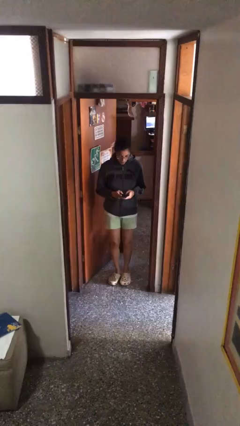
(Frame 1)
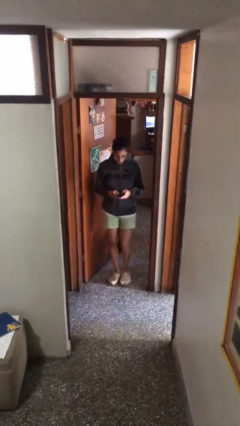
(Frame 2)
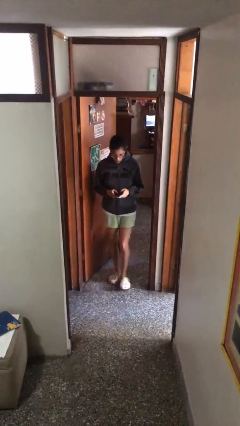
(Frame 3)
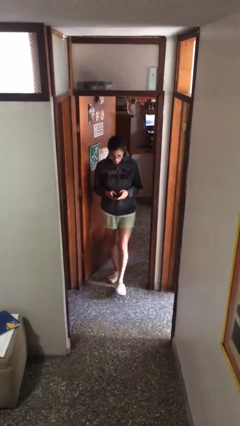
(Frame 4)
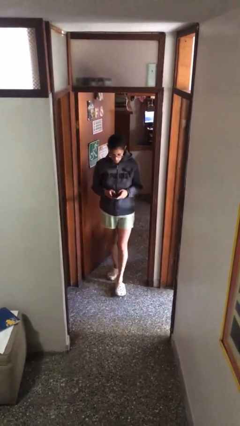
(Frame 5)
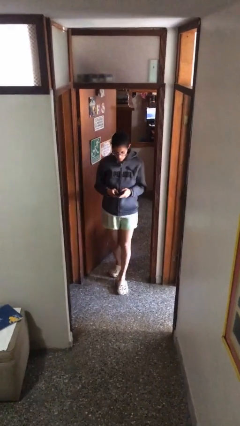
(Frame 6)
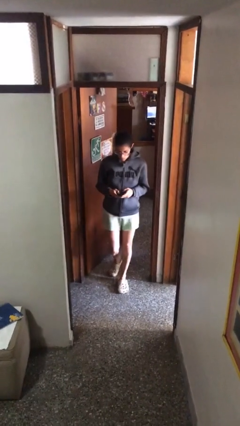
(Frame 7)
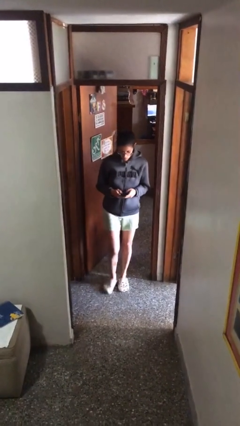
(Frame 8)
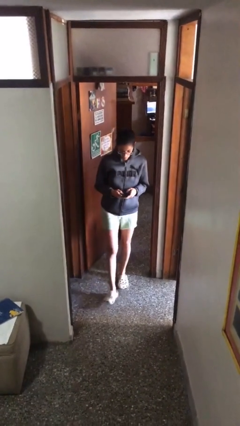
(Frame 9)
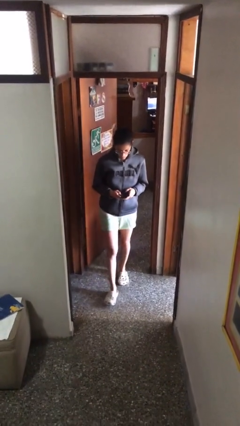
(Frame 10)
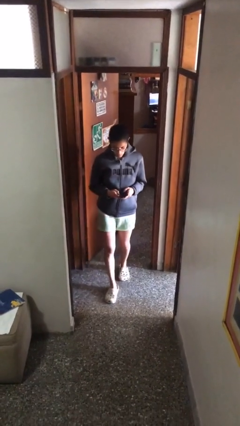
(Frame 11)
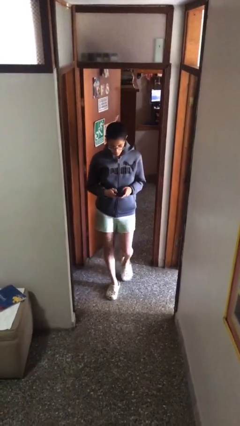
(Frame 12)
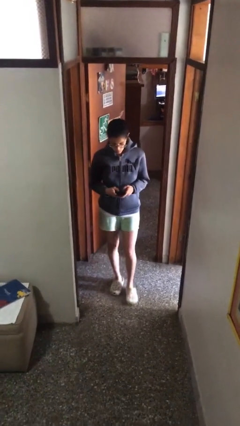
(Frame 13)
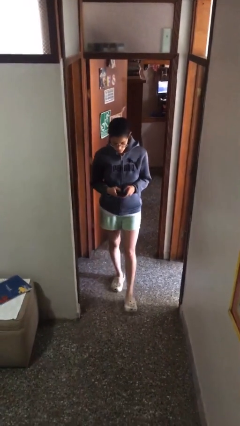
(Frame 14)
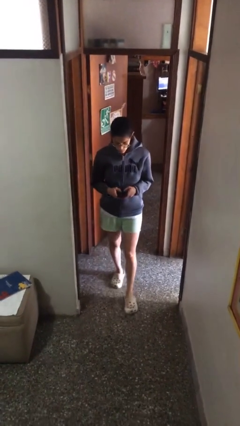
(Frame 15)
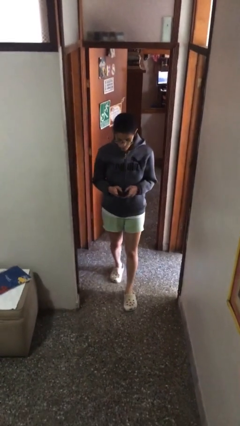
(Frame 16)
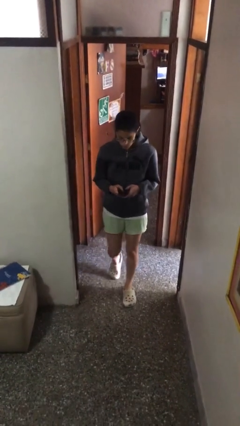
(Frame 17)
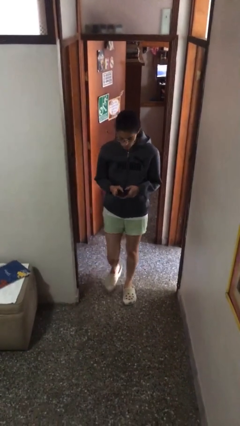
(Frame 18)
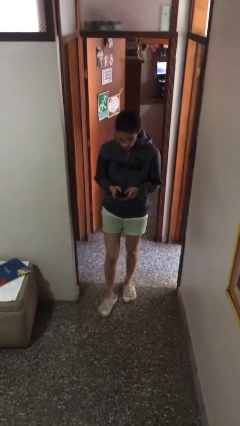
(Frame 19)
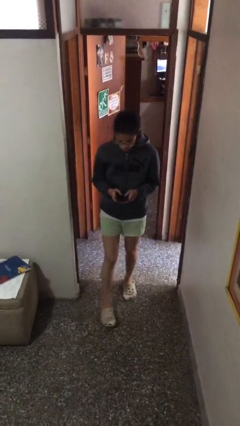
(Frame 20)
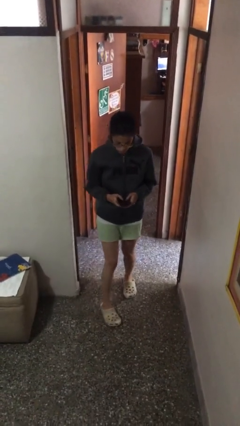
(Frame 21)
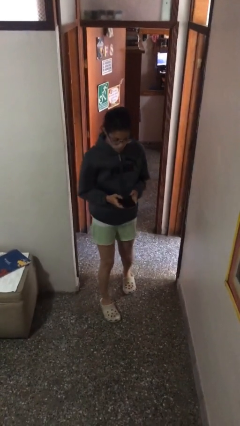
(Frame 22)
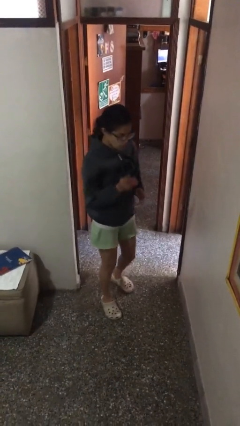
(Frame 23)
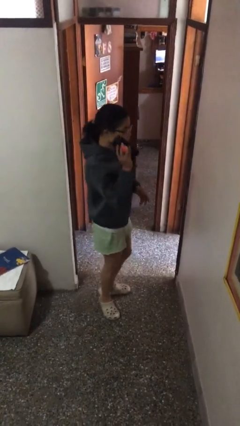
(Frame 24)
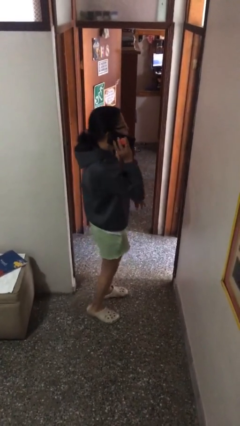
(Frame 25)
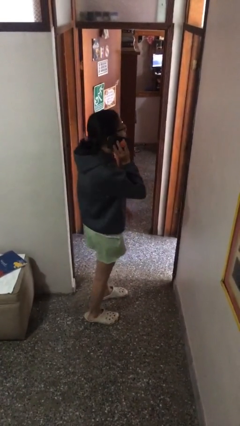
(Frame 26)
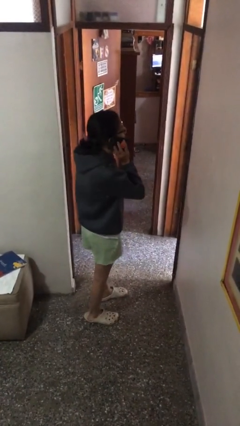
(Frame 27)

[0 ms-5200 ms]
person texts on phone

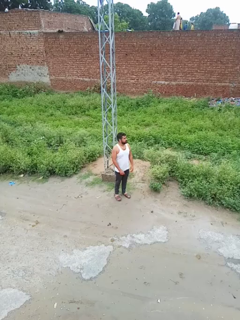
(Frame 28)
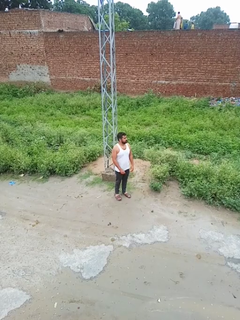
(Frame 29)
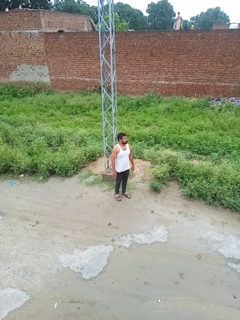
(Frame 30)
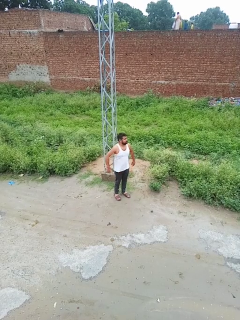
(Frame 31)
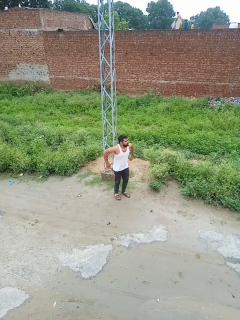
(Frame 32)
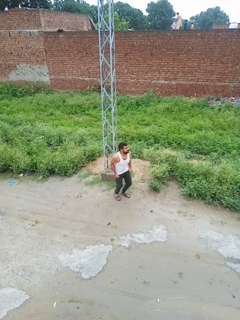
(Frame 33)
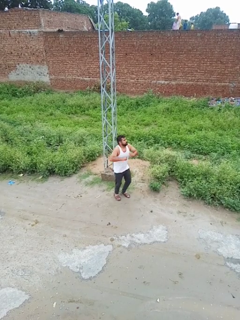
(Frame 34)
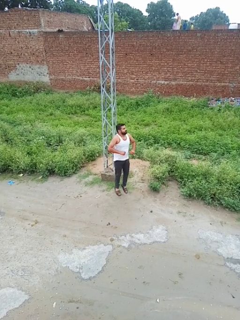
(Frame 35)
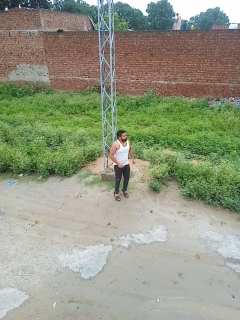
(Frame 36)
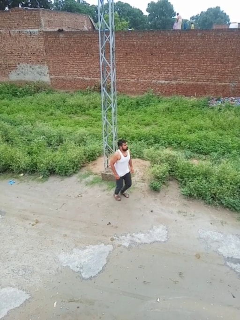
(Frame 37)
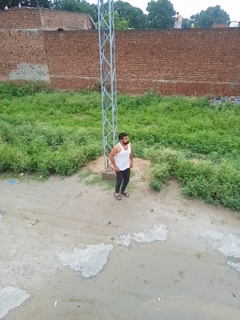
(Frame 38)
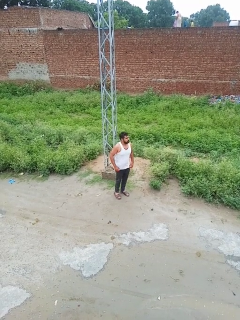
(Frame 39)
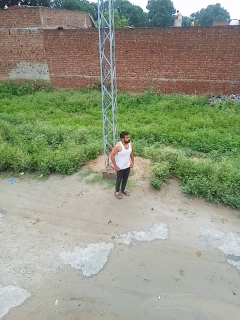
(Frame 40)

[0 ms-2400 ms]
person jumps

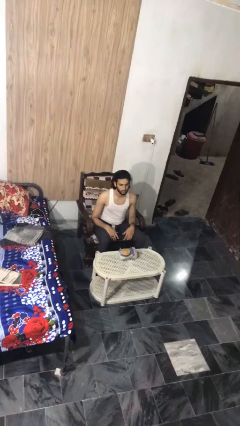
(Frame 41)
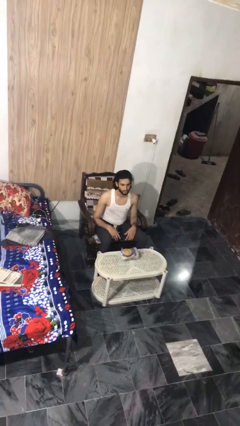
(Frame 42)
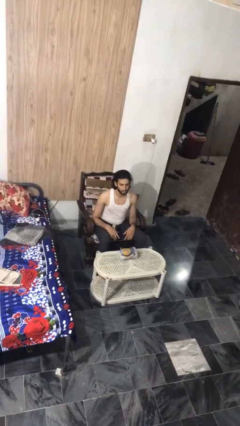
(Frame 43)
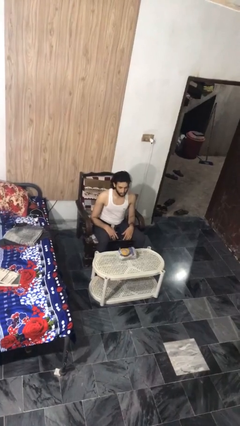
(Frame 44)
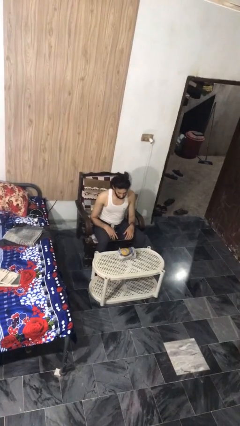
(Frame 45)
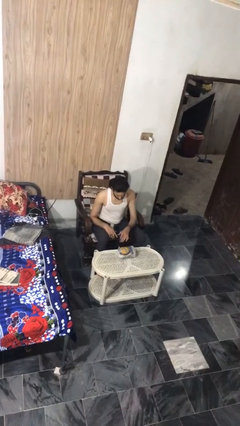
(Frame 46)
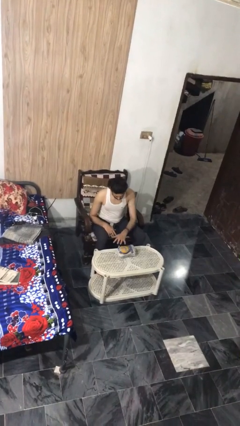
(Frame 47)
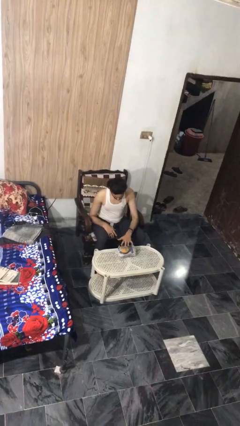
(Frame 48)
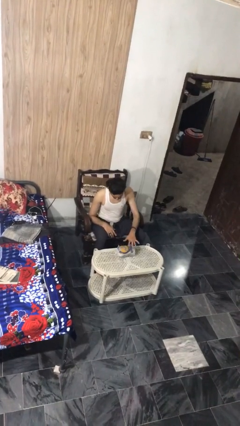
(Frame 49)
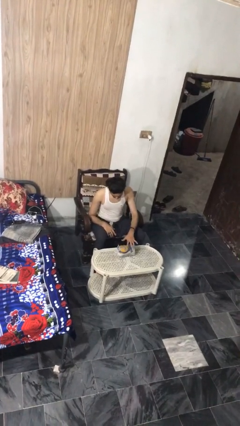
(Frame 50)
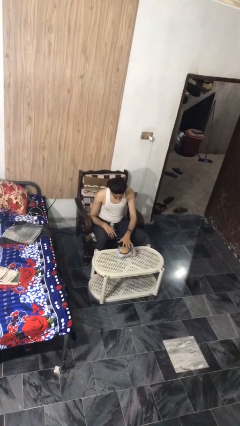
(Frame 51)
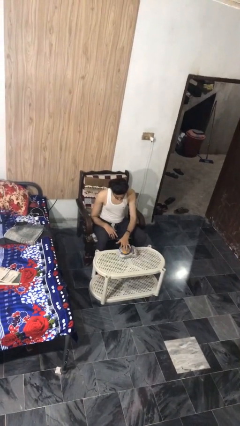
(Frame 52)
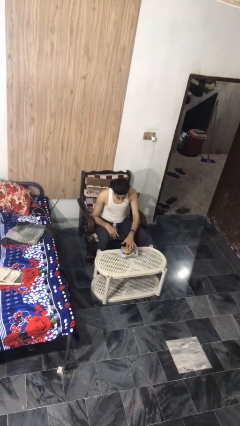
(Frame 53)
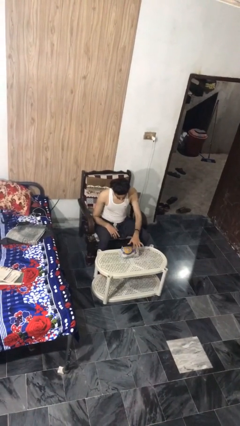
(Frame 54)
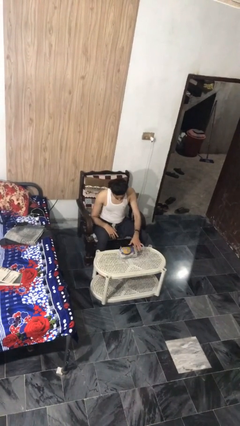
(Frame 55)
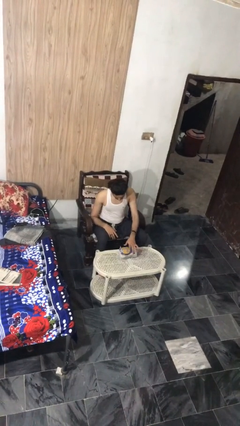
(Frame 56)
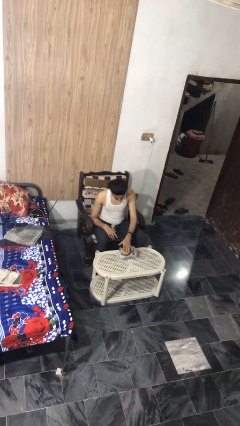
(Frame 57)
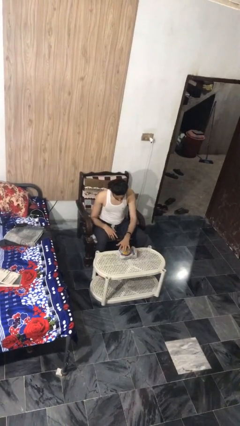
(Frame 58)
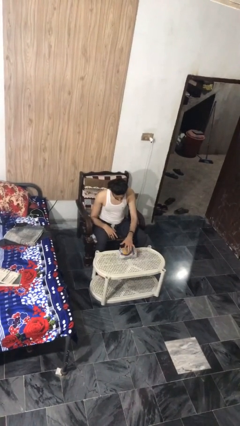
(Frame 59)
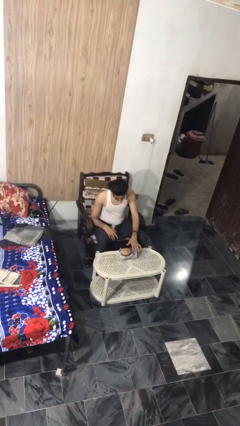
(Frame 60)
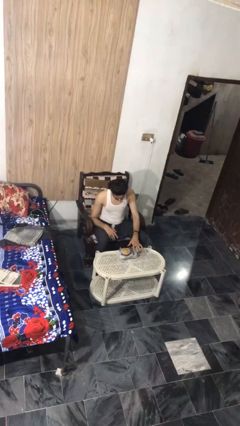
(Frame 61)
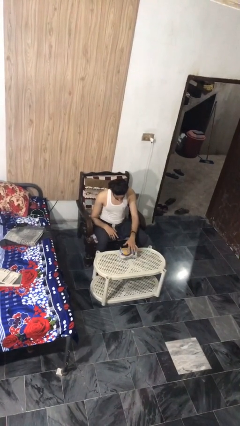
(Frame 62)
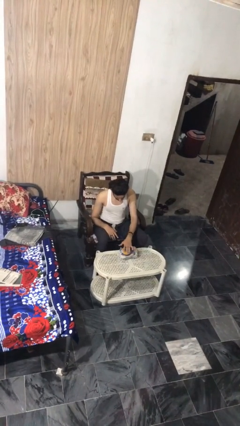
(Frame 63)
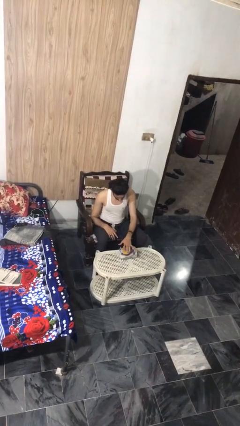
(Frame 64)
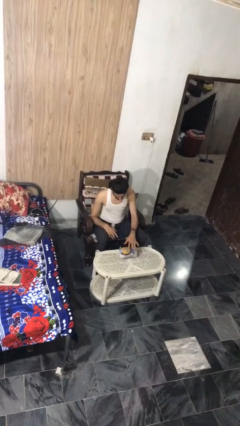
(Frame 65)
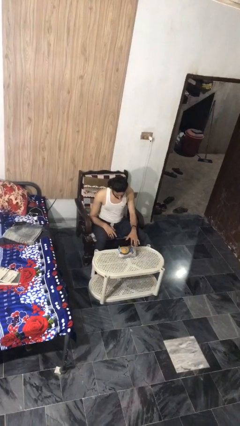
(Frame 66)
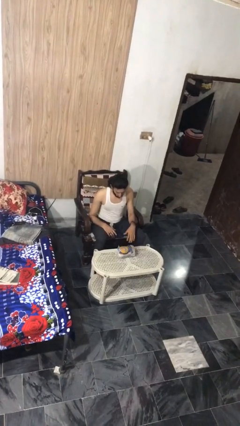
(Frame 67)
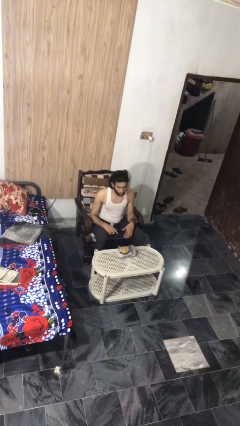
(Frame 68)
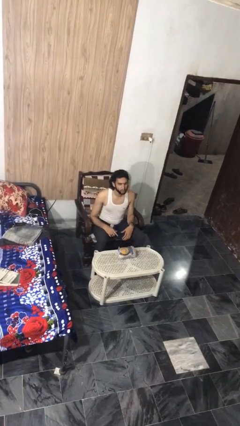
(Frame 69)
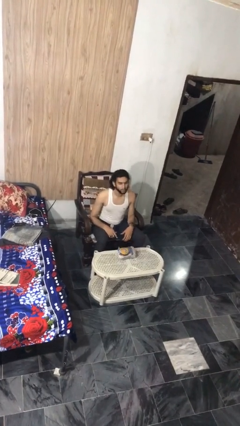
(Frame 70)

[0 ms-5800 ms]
person waves hand over object

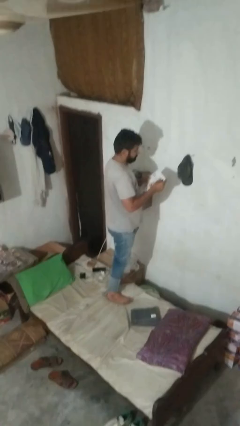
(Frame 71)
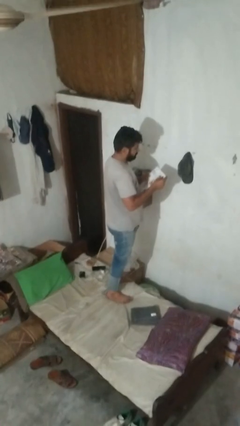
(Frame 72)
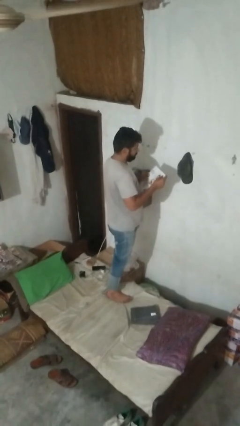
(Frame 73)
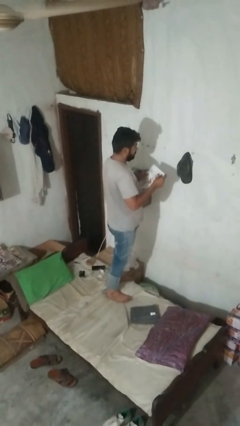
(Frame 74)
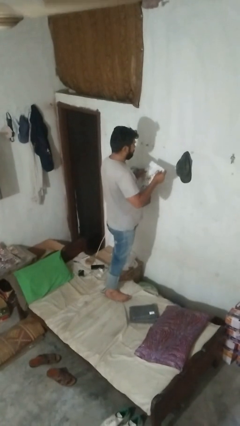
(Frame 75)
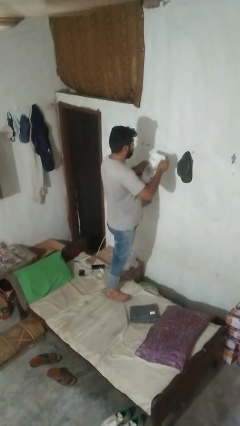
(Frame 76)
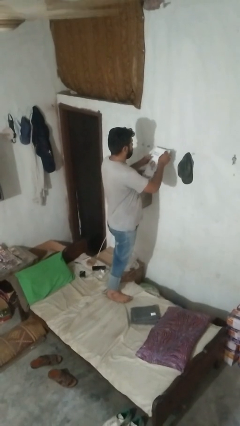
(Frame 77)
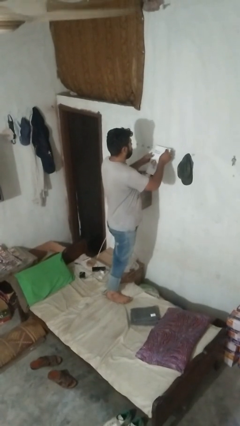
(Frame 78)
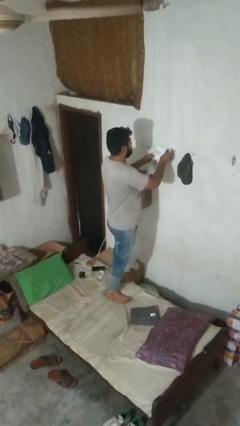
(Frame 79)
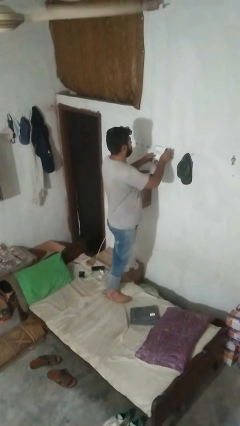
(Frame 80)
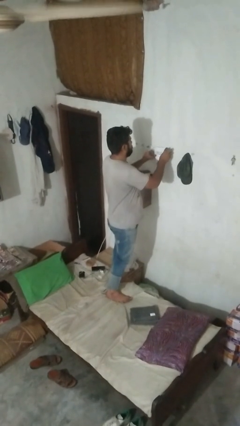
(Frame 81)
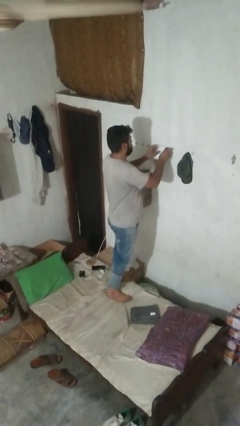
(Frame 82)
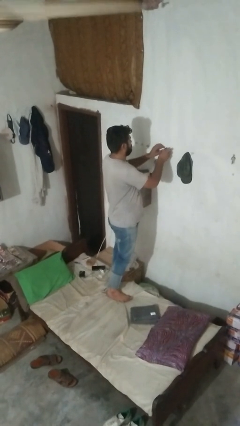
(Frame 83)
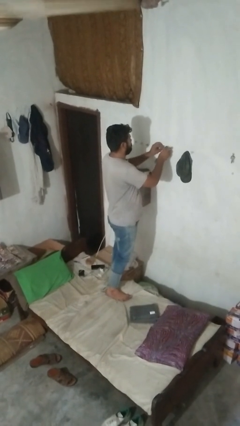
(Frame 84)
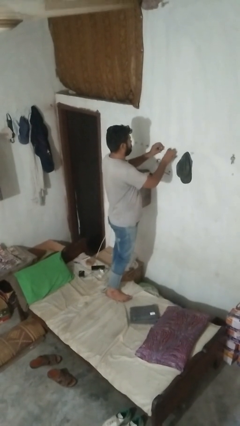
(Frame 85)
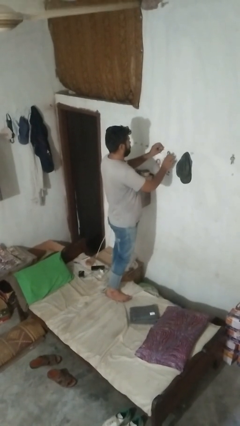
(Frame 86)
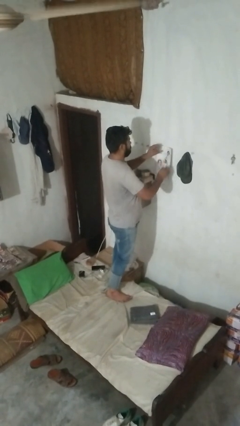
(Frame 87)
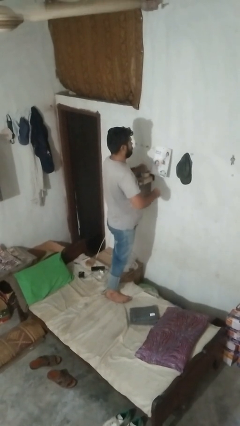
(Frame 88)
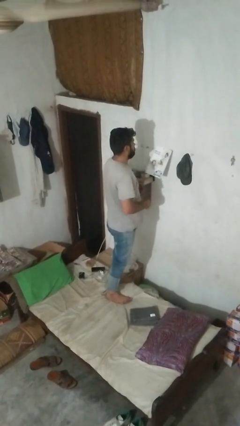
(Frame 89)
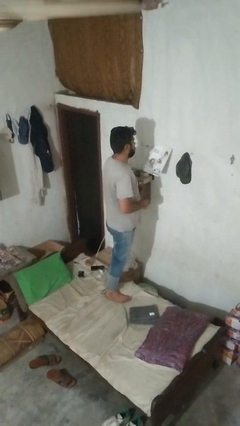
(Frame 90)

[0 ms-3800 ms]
person puts up picture frame

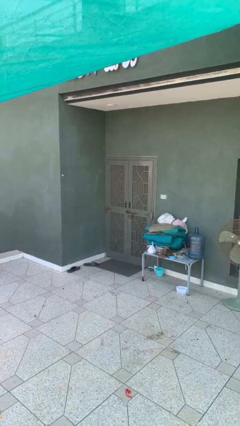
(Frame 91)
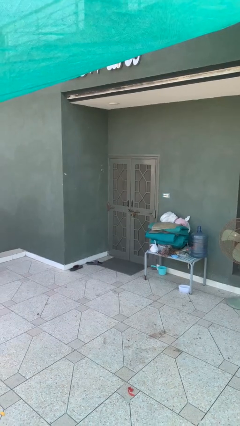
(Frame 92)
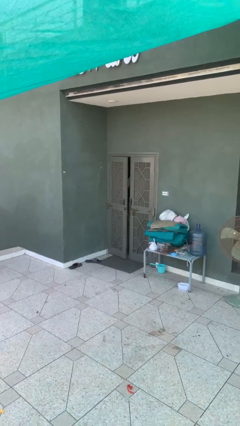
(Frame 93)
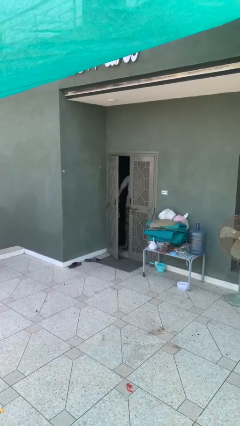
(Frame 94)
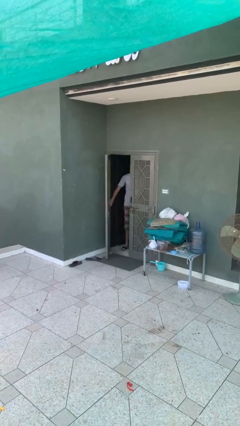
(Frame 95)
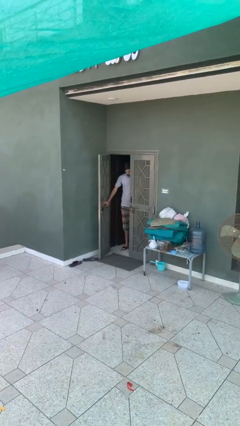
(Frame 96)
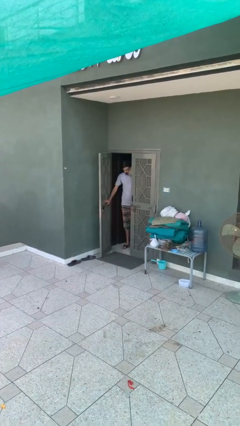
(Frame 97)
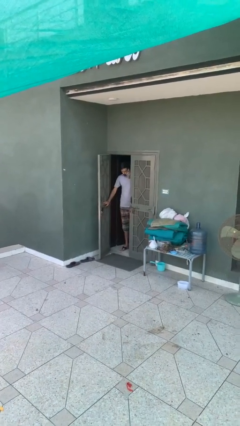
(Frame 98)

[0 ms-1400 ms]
person opens facility door
